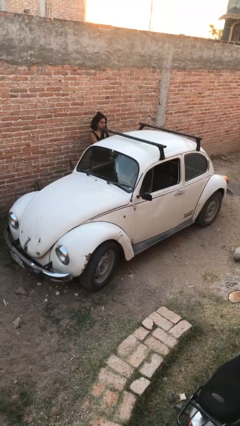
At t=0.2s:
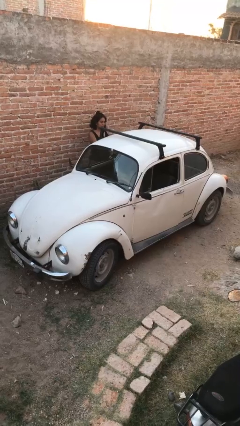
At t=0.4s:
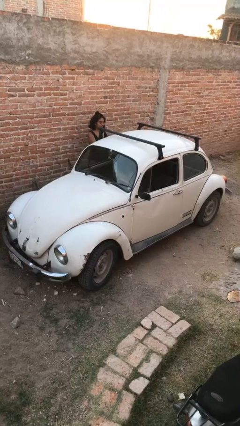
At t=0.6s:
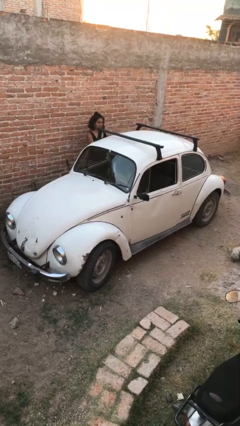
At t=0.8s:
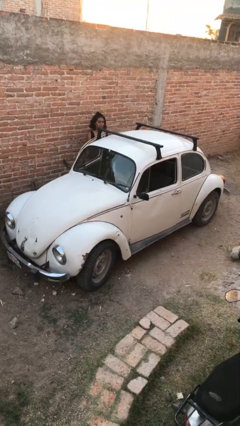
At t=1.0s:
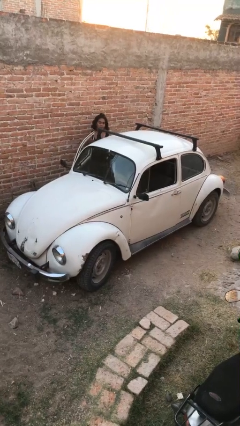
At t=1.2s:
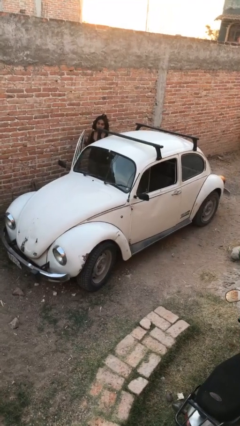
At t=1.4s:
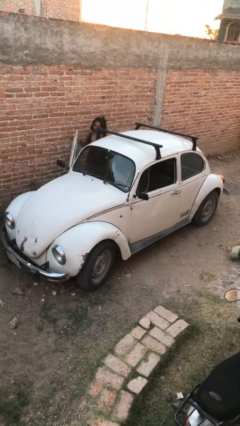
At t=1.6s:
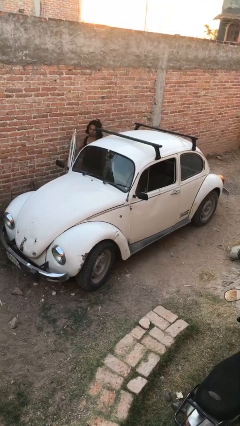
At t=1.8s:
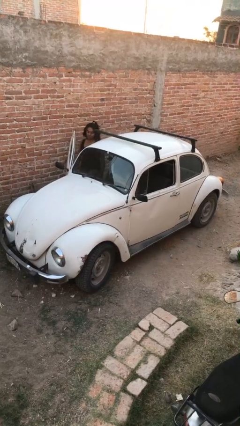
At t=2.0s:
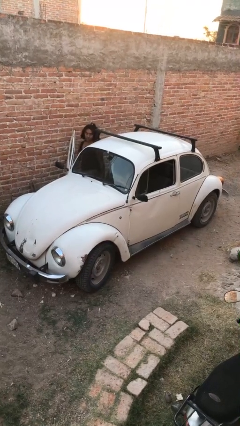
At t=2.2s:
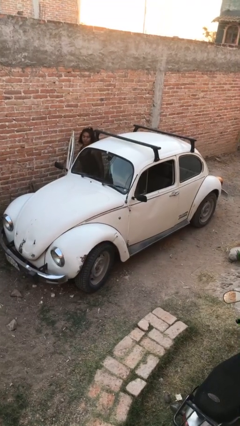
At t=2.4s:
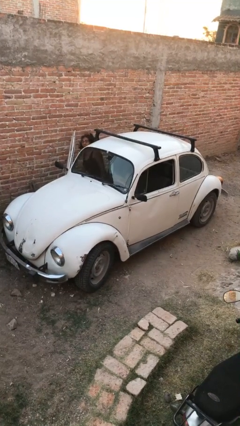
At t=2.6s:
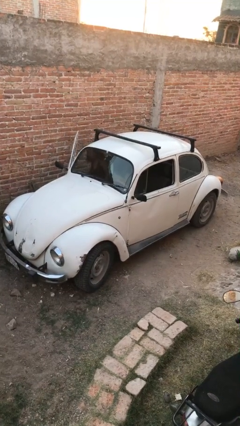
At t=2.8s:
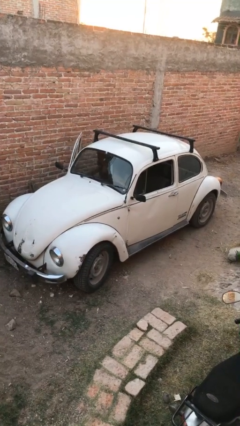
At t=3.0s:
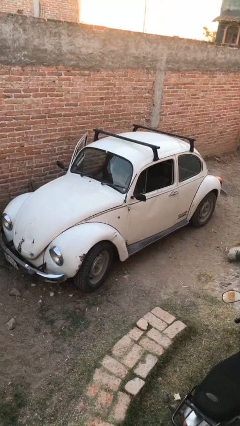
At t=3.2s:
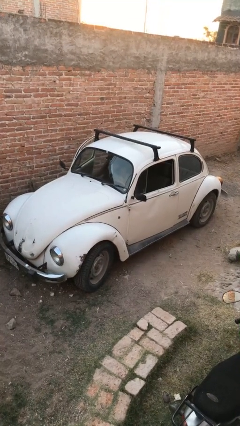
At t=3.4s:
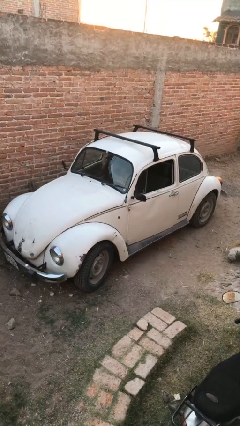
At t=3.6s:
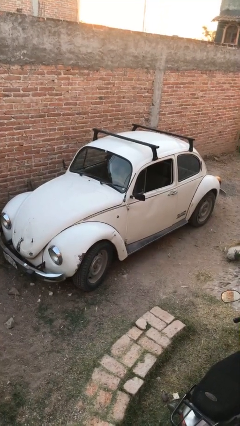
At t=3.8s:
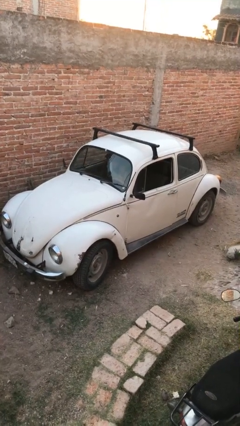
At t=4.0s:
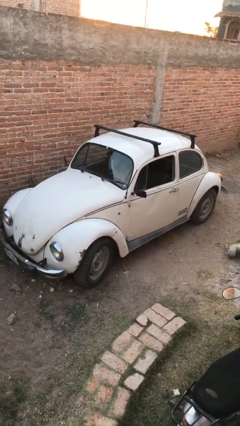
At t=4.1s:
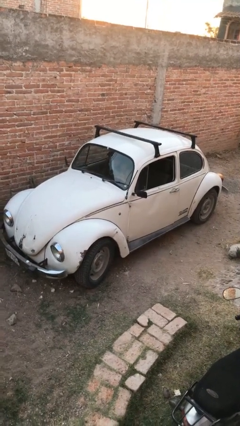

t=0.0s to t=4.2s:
car picks up person

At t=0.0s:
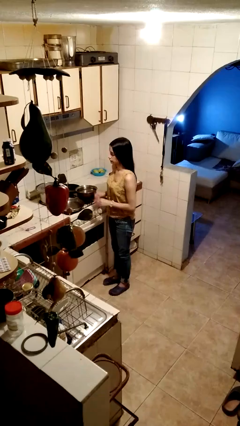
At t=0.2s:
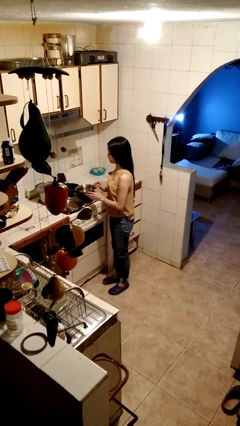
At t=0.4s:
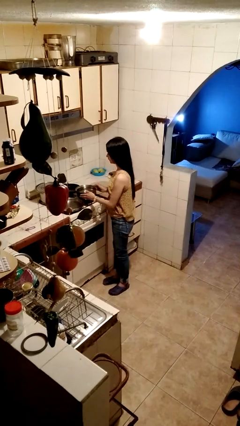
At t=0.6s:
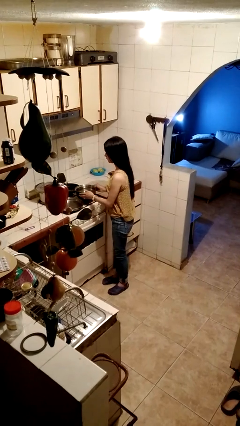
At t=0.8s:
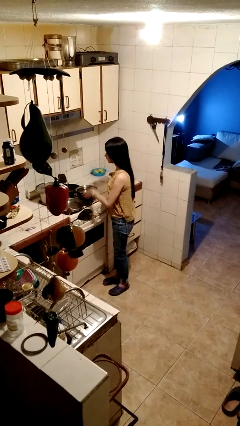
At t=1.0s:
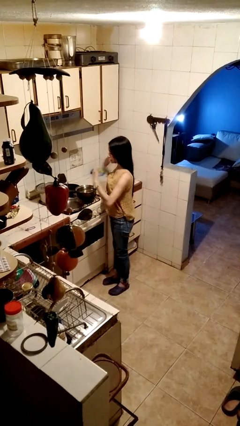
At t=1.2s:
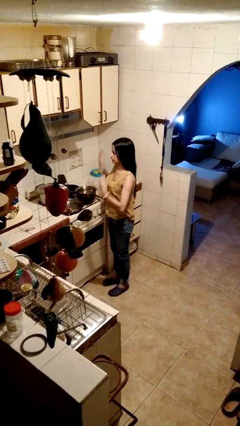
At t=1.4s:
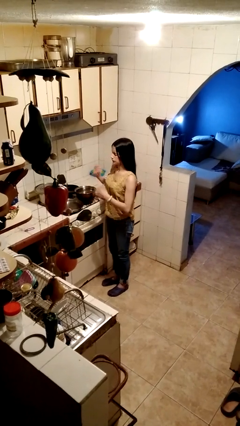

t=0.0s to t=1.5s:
person burns hand

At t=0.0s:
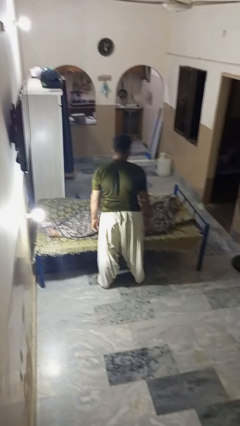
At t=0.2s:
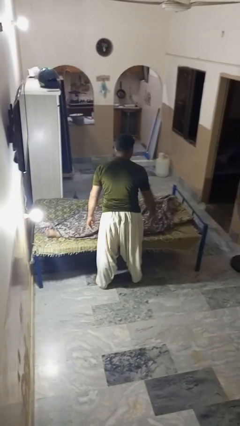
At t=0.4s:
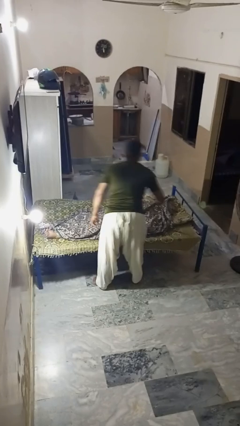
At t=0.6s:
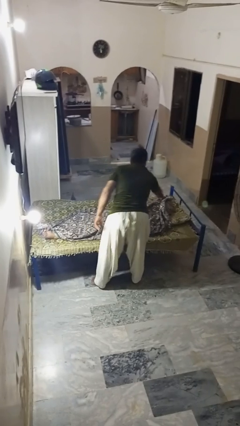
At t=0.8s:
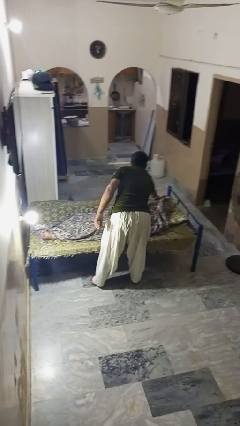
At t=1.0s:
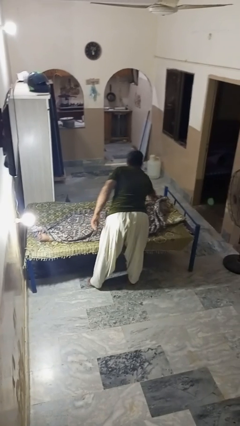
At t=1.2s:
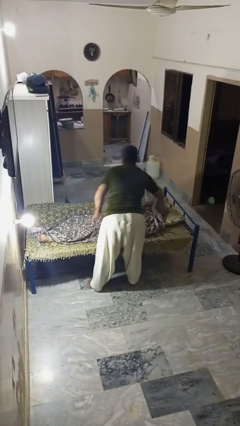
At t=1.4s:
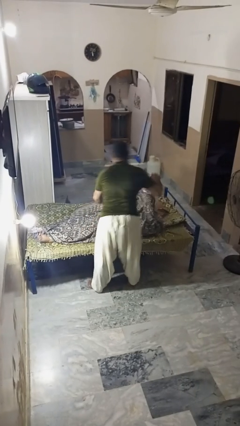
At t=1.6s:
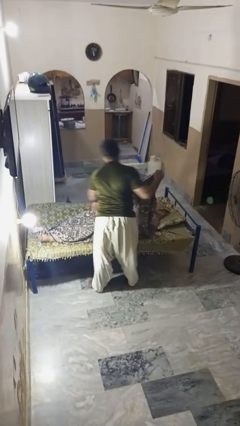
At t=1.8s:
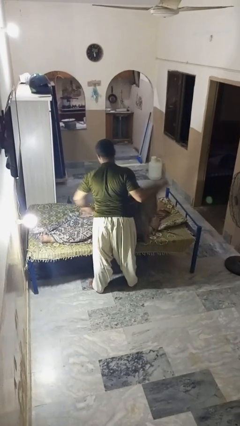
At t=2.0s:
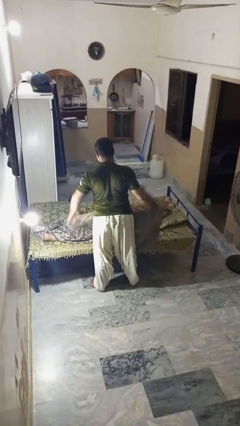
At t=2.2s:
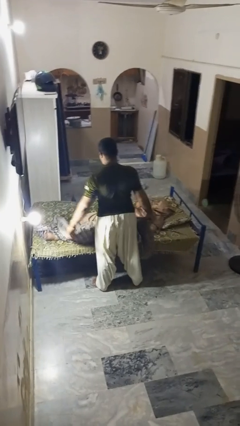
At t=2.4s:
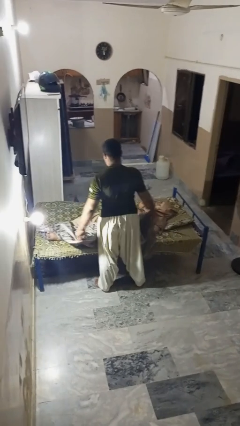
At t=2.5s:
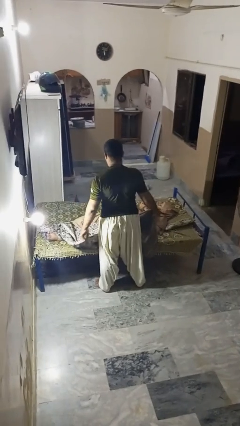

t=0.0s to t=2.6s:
person uncovers friend with blanket

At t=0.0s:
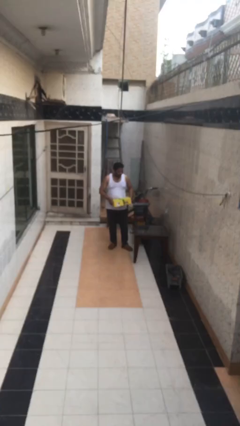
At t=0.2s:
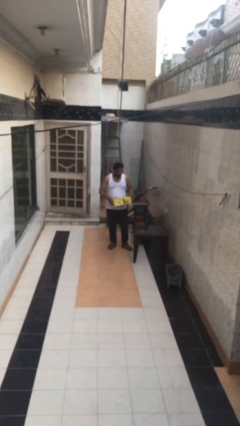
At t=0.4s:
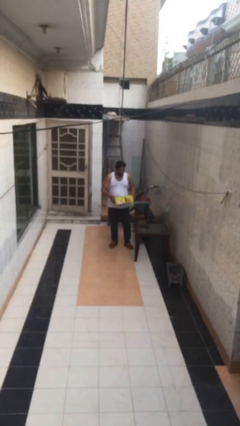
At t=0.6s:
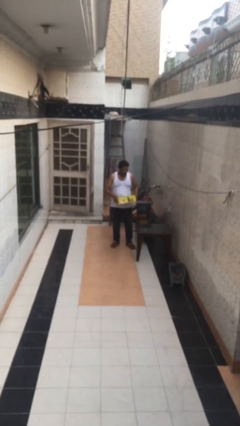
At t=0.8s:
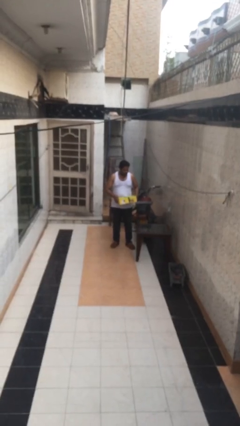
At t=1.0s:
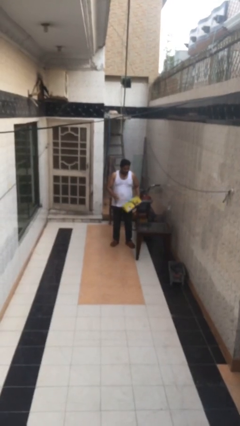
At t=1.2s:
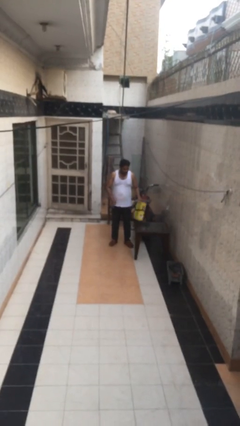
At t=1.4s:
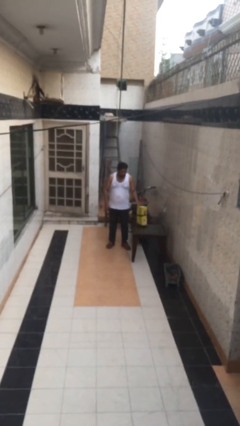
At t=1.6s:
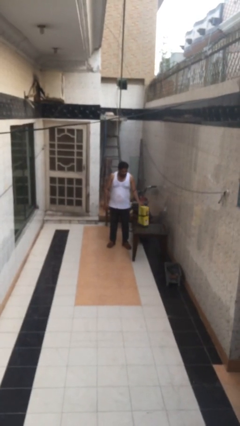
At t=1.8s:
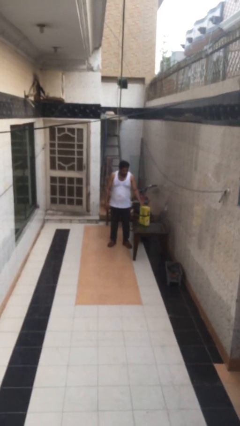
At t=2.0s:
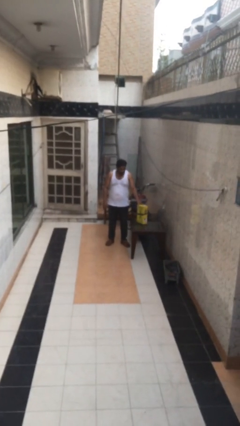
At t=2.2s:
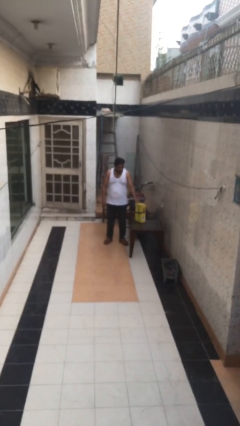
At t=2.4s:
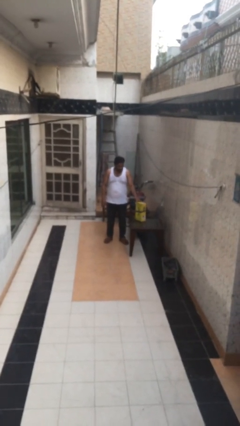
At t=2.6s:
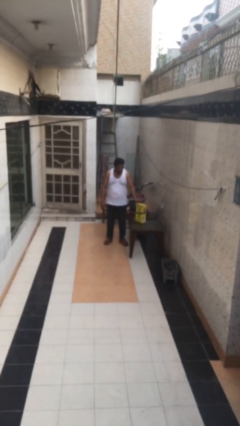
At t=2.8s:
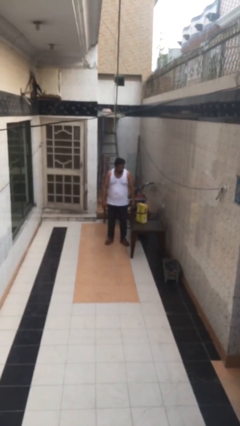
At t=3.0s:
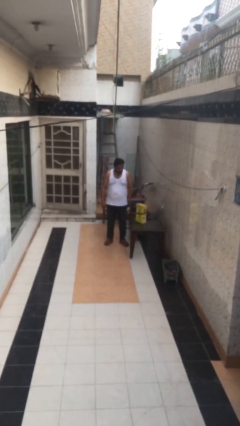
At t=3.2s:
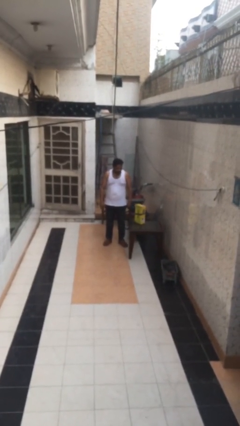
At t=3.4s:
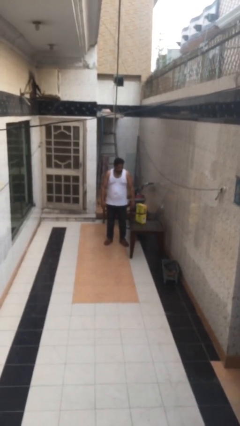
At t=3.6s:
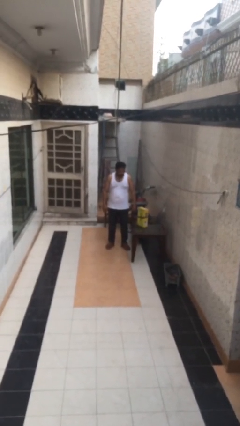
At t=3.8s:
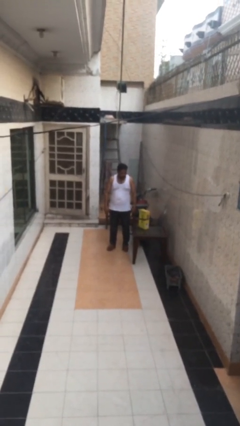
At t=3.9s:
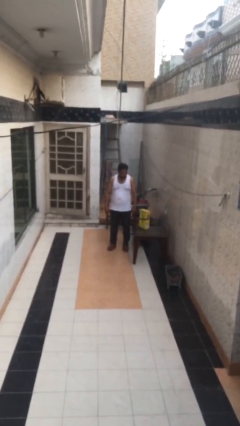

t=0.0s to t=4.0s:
person puts down object on table

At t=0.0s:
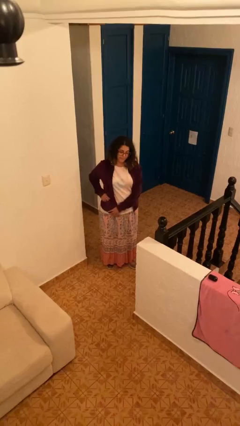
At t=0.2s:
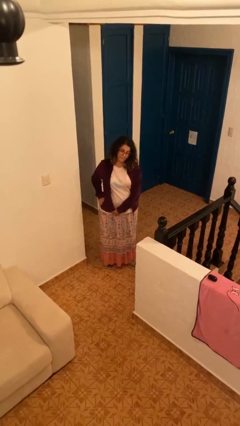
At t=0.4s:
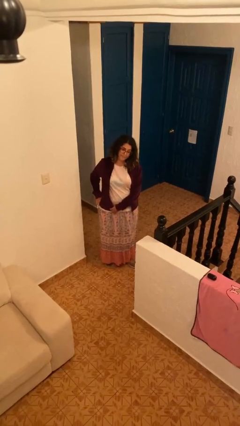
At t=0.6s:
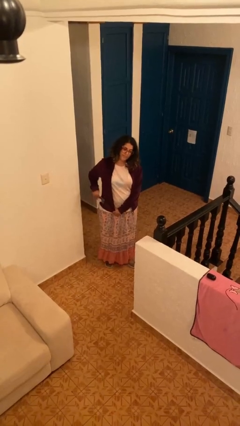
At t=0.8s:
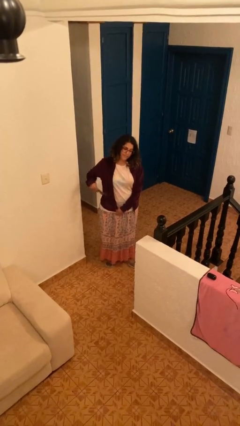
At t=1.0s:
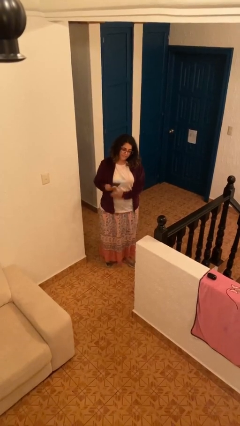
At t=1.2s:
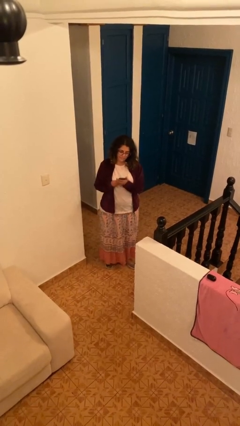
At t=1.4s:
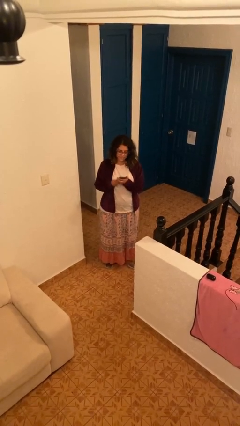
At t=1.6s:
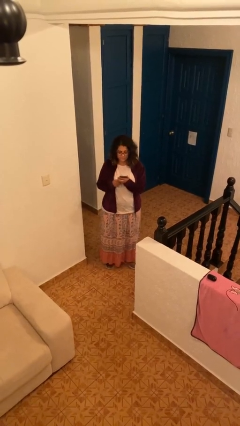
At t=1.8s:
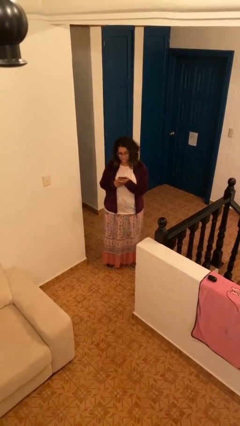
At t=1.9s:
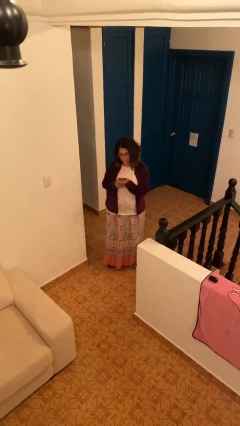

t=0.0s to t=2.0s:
person takes phone from pocket

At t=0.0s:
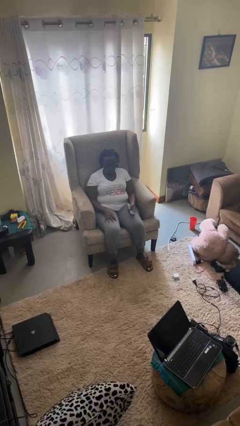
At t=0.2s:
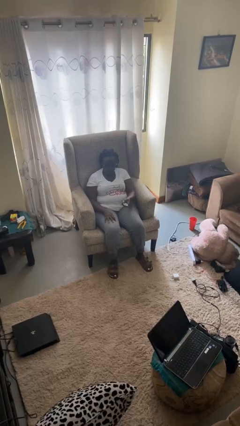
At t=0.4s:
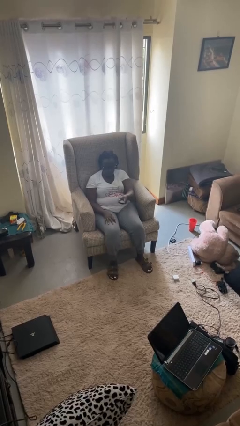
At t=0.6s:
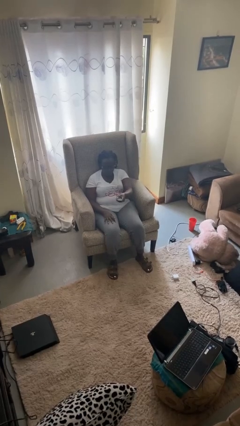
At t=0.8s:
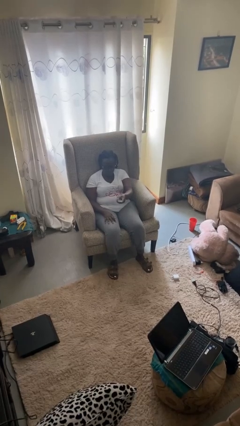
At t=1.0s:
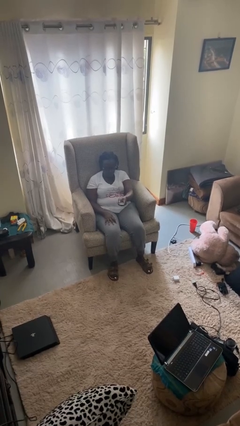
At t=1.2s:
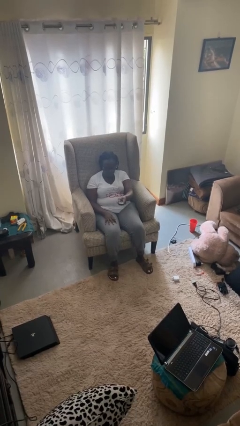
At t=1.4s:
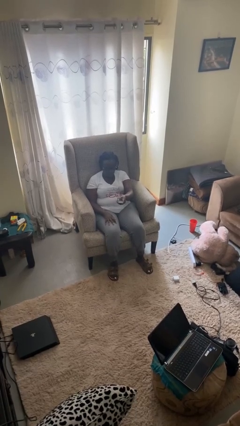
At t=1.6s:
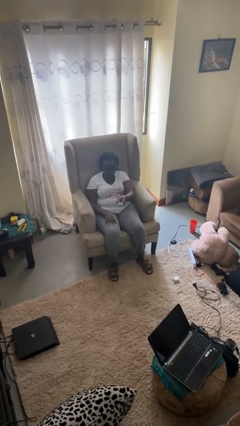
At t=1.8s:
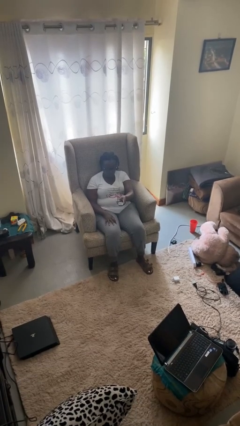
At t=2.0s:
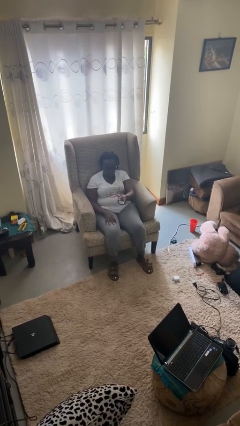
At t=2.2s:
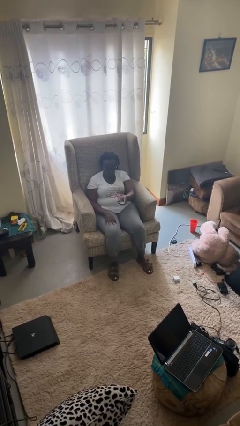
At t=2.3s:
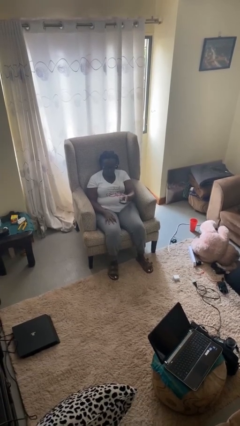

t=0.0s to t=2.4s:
person uses television remote

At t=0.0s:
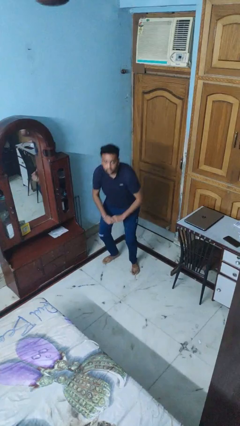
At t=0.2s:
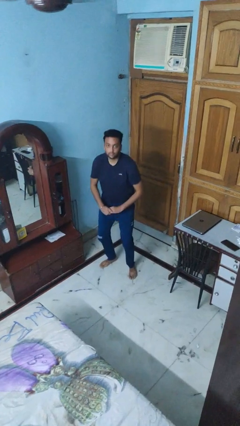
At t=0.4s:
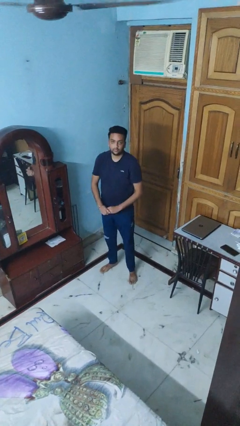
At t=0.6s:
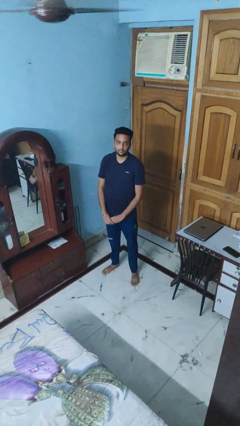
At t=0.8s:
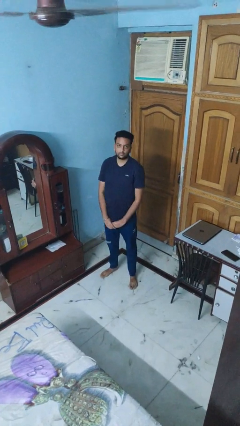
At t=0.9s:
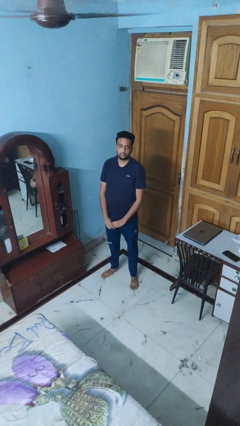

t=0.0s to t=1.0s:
person stands up
